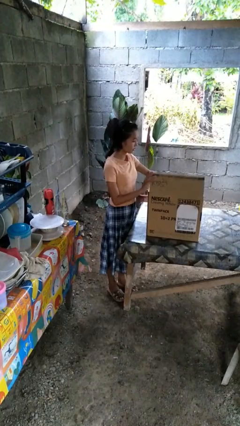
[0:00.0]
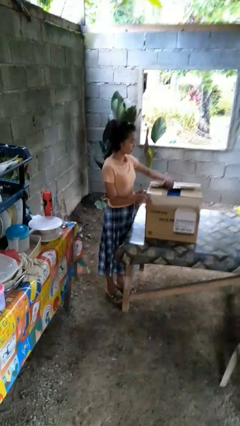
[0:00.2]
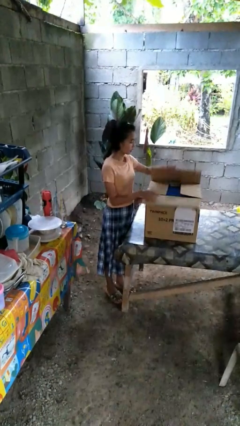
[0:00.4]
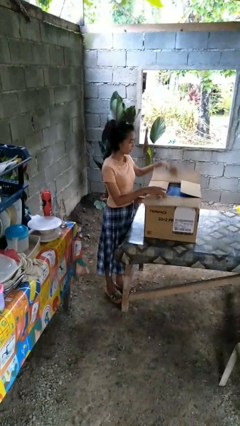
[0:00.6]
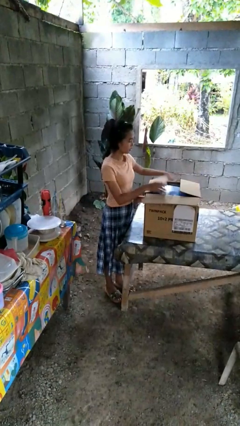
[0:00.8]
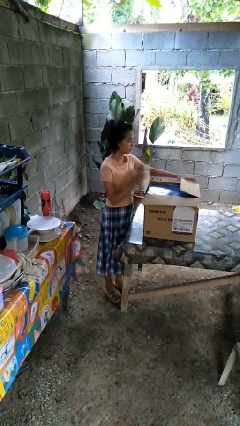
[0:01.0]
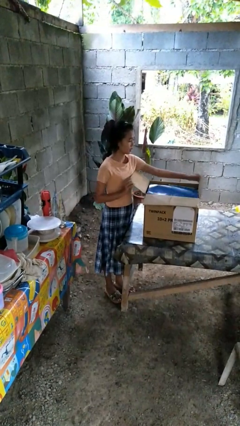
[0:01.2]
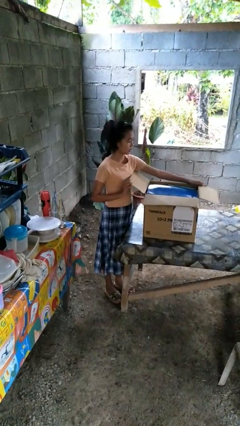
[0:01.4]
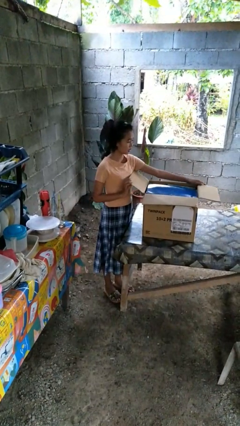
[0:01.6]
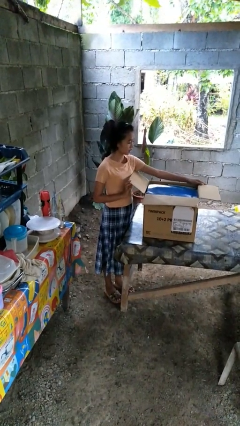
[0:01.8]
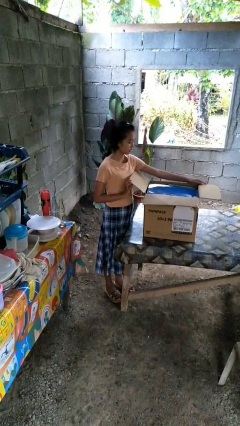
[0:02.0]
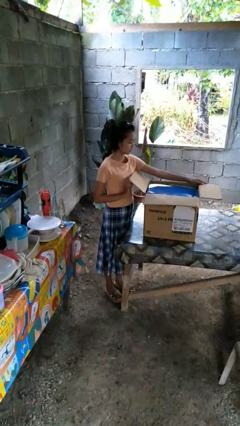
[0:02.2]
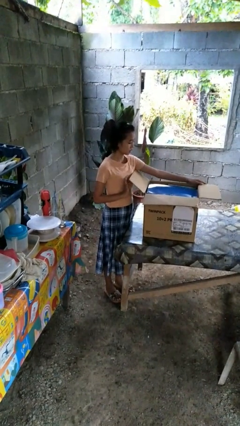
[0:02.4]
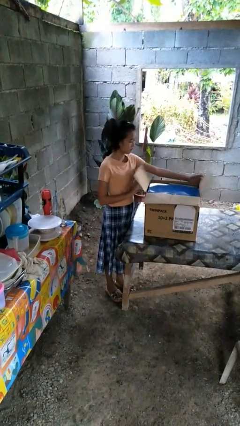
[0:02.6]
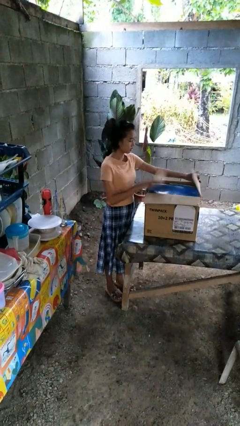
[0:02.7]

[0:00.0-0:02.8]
person opens box

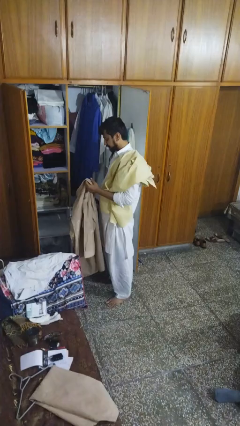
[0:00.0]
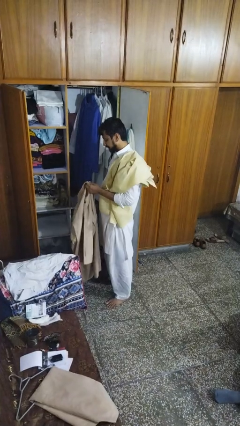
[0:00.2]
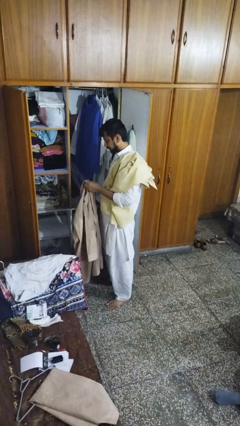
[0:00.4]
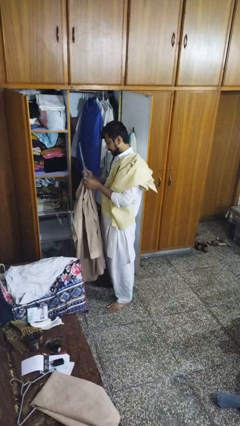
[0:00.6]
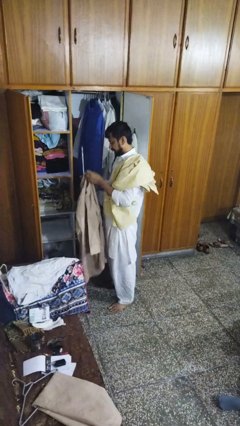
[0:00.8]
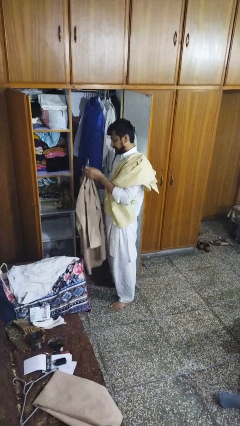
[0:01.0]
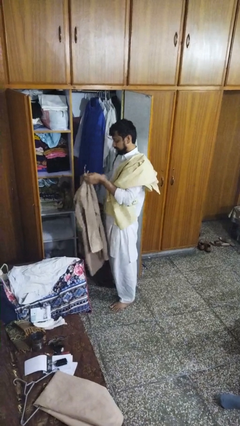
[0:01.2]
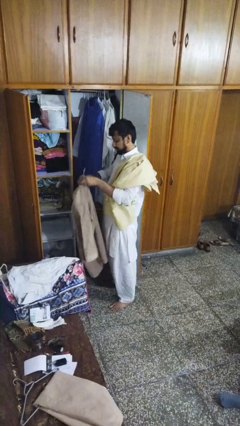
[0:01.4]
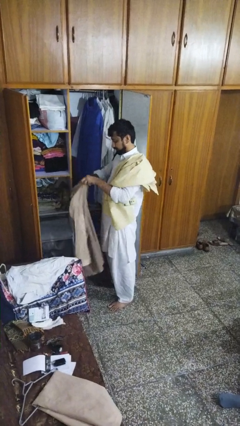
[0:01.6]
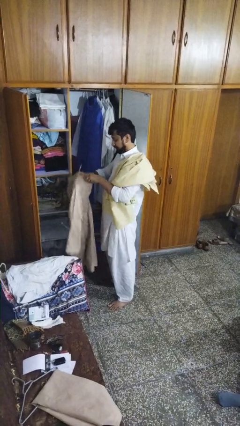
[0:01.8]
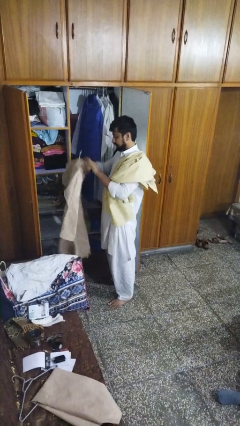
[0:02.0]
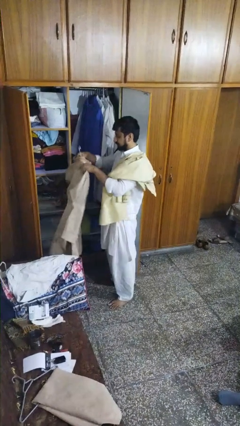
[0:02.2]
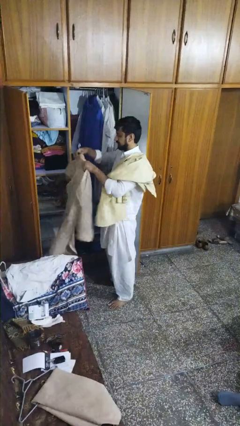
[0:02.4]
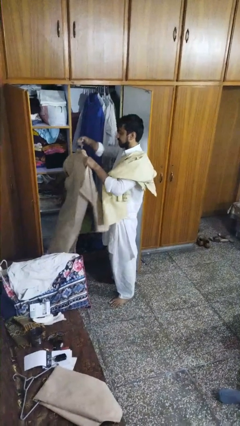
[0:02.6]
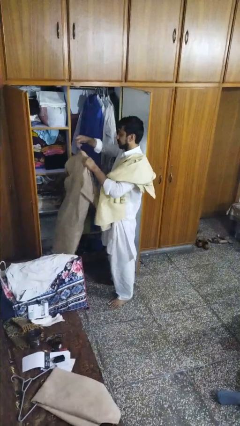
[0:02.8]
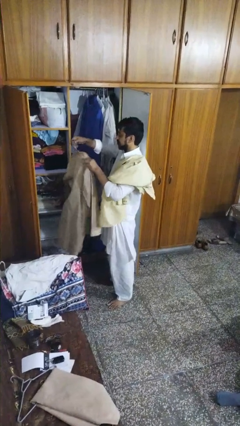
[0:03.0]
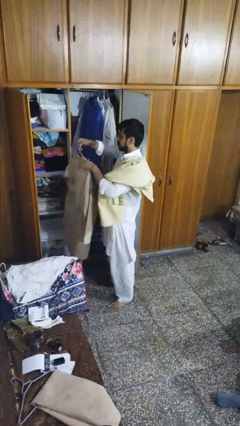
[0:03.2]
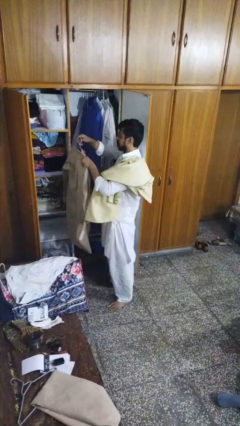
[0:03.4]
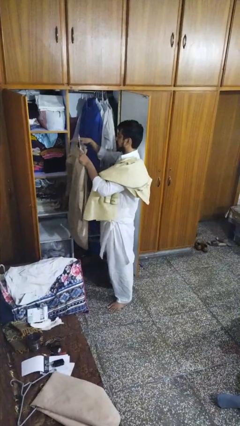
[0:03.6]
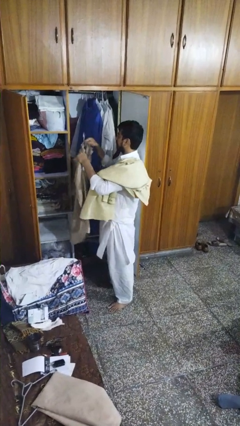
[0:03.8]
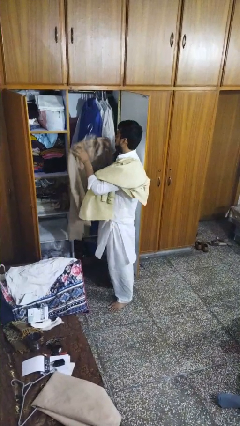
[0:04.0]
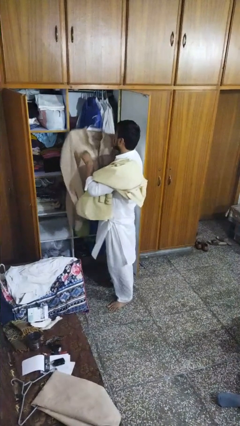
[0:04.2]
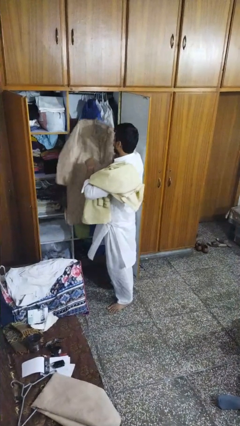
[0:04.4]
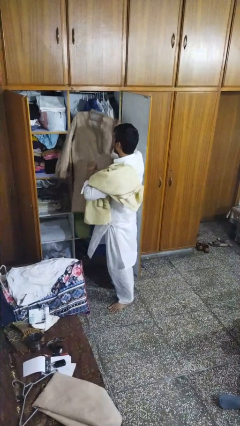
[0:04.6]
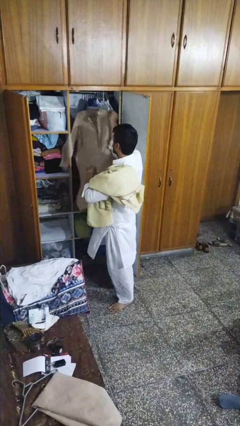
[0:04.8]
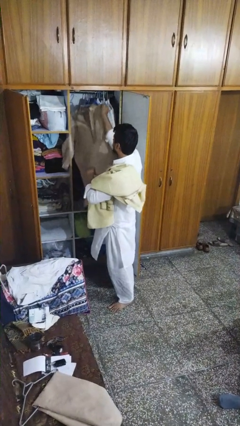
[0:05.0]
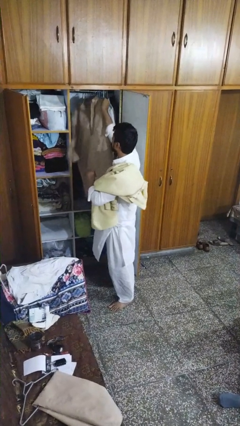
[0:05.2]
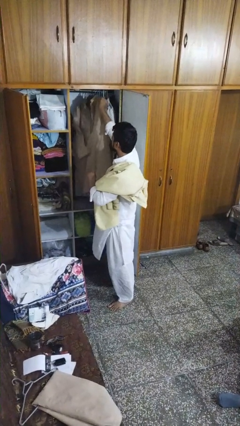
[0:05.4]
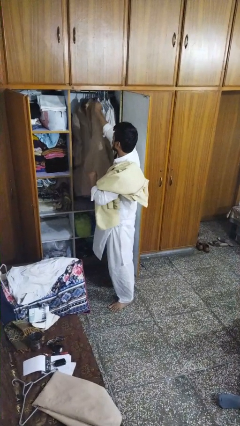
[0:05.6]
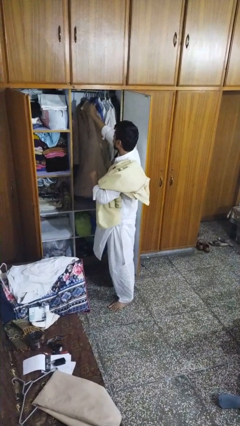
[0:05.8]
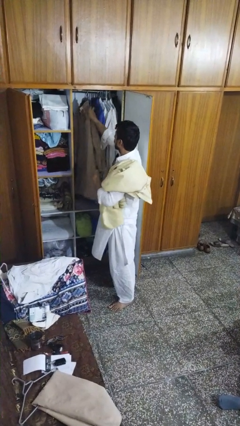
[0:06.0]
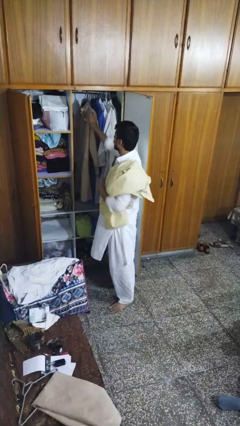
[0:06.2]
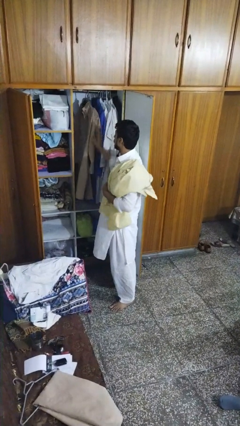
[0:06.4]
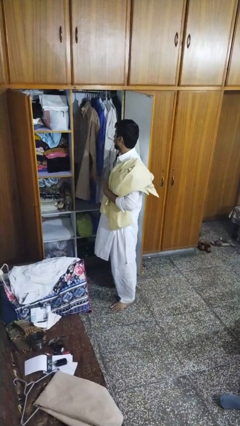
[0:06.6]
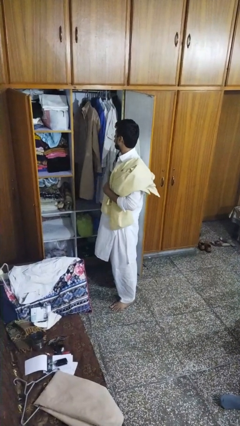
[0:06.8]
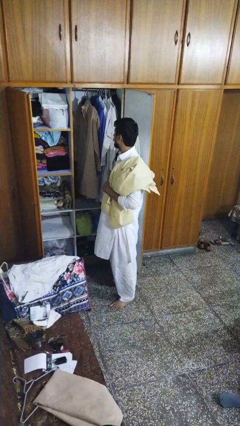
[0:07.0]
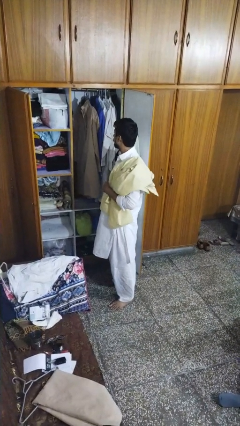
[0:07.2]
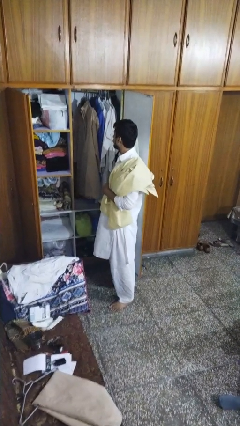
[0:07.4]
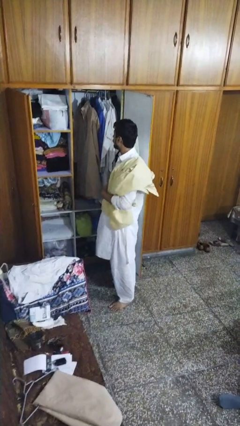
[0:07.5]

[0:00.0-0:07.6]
person puts clothes into closet

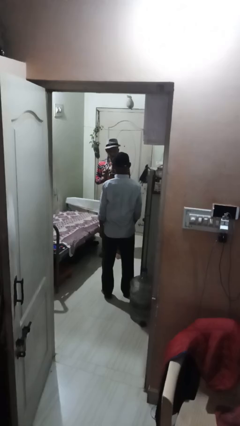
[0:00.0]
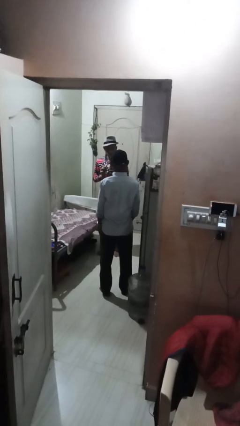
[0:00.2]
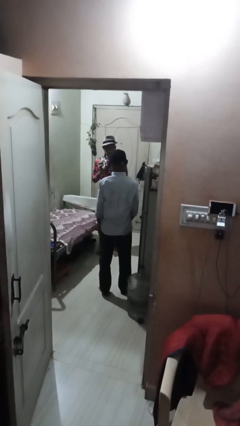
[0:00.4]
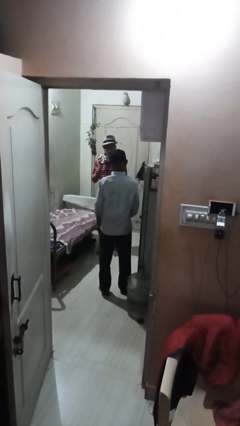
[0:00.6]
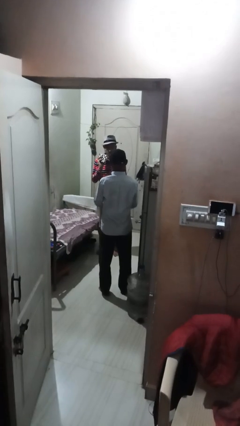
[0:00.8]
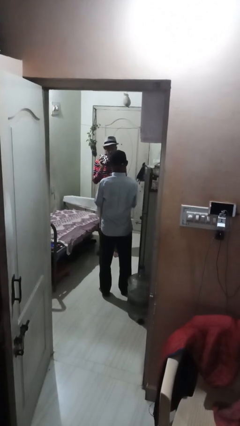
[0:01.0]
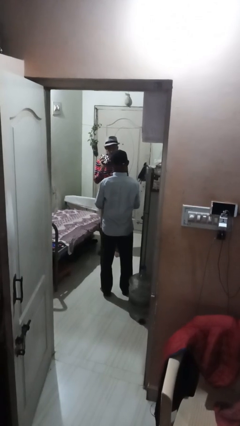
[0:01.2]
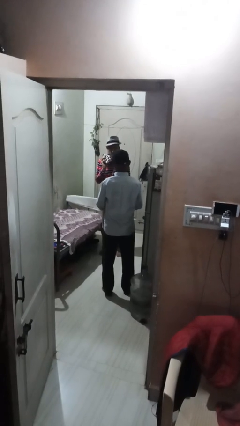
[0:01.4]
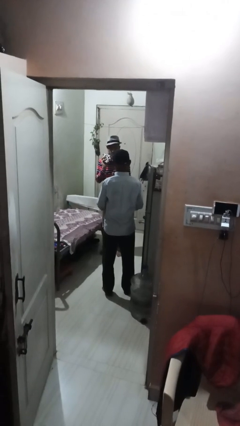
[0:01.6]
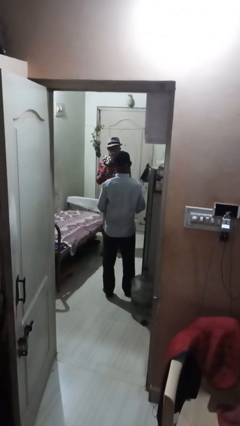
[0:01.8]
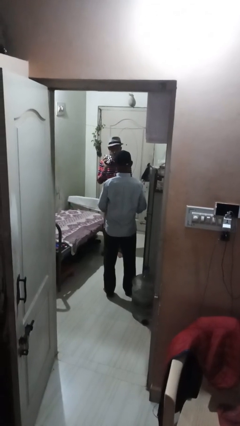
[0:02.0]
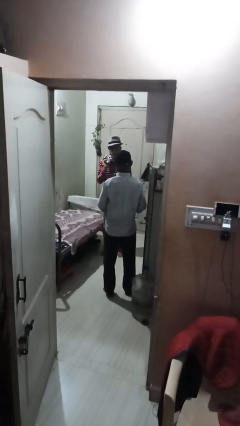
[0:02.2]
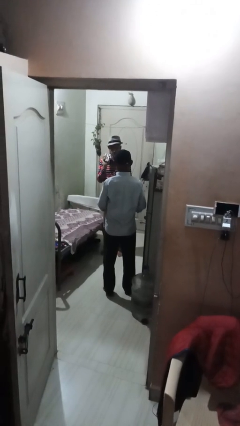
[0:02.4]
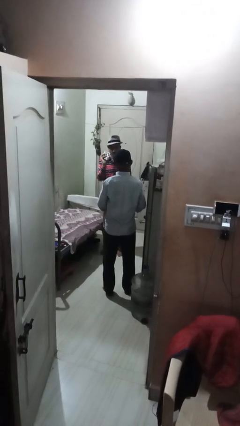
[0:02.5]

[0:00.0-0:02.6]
person throws object to person

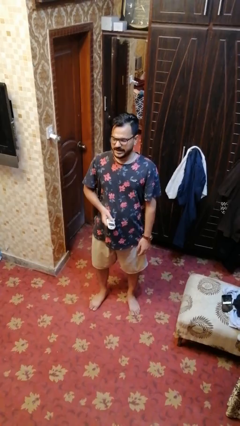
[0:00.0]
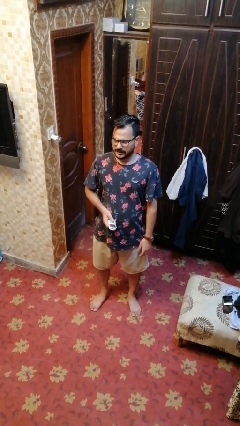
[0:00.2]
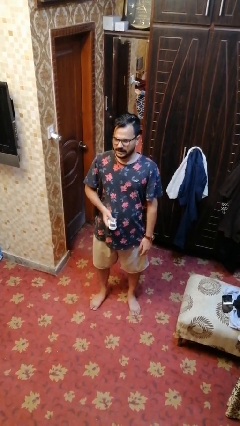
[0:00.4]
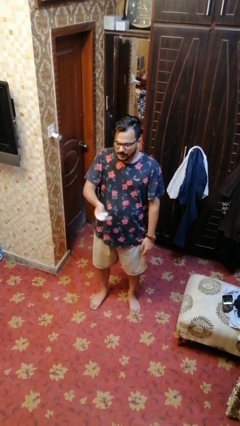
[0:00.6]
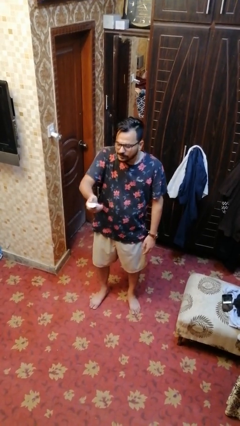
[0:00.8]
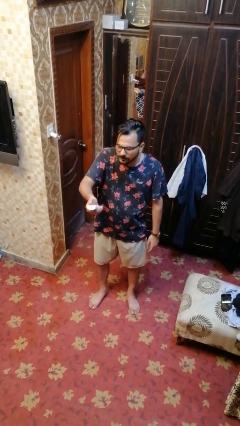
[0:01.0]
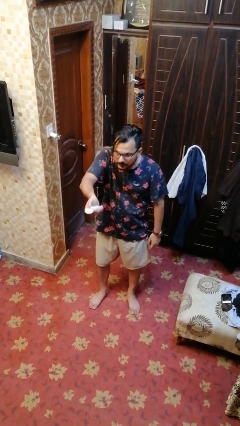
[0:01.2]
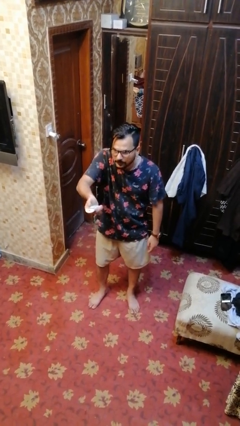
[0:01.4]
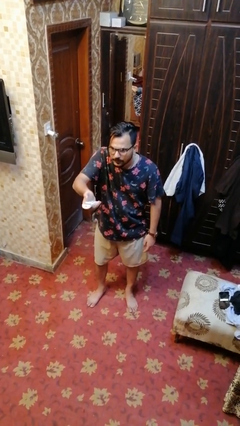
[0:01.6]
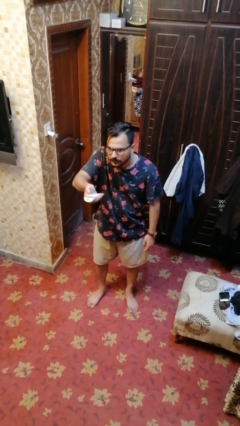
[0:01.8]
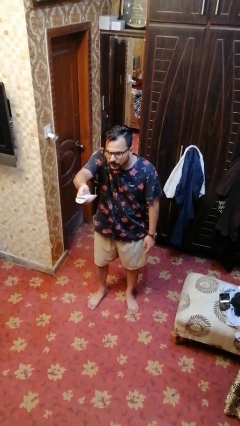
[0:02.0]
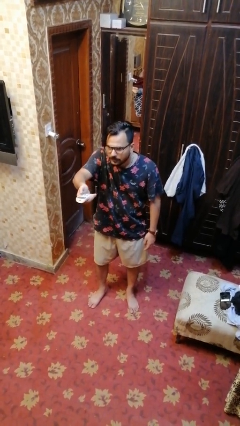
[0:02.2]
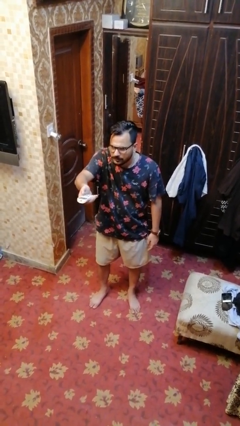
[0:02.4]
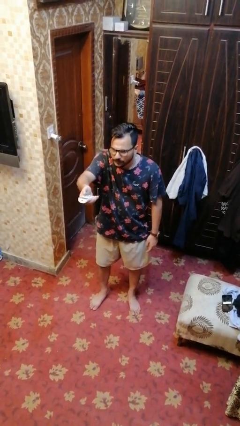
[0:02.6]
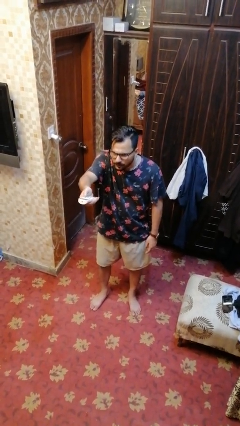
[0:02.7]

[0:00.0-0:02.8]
person uses television remote

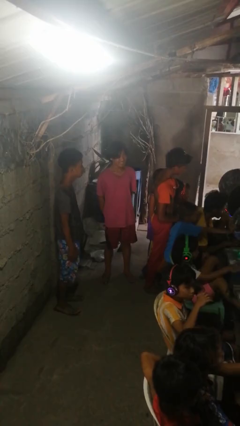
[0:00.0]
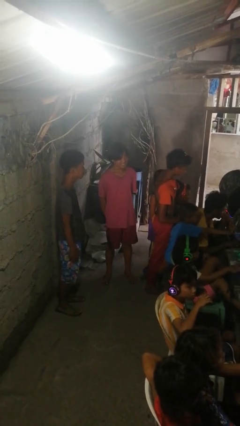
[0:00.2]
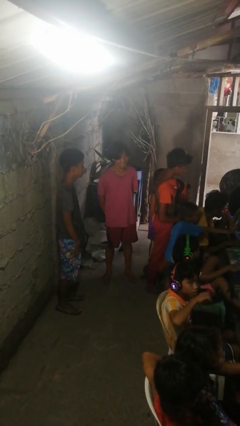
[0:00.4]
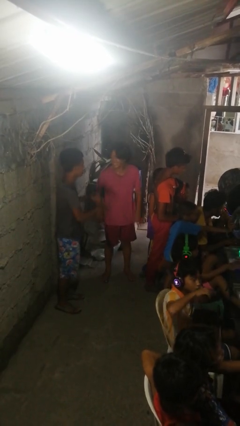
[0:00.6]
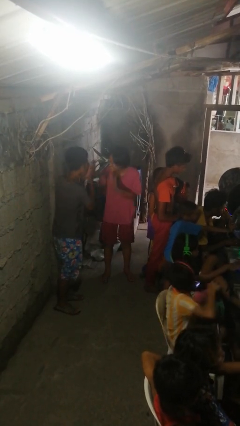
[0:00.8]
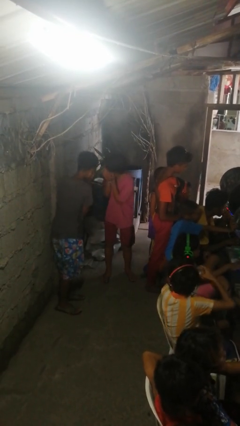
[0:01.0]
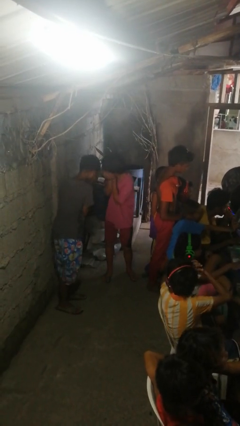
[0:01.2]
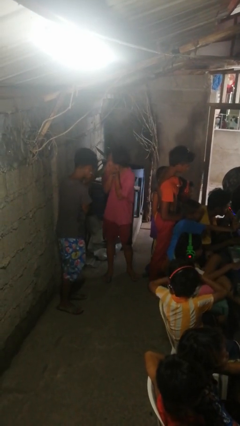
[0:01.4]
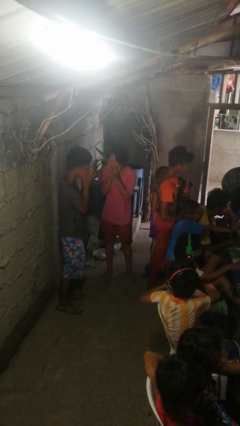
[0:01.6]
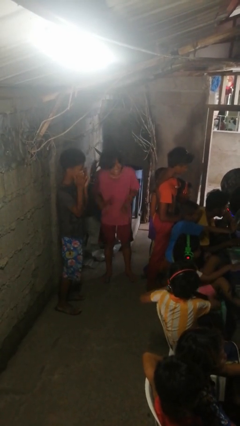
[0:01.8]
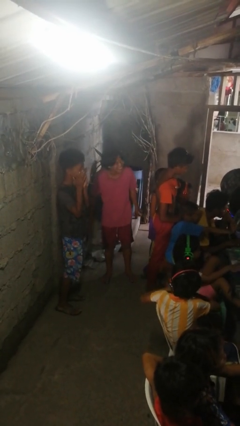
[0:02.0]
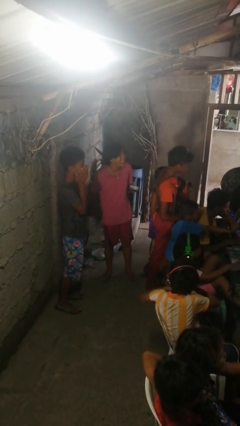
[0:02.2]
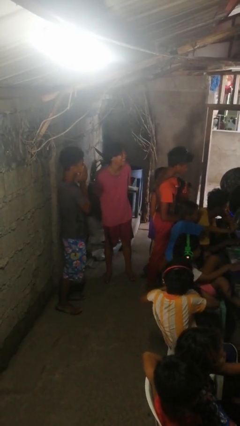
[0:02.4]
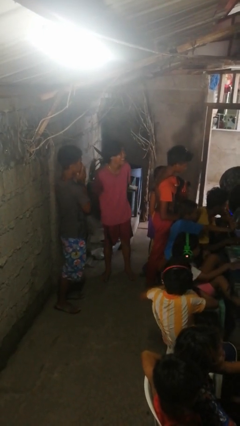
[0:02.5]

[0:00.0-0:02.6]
person laughs with person
